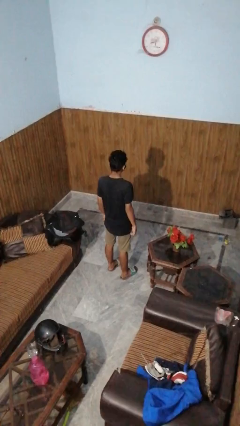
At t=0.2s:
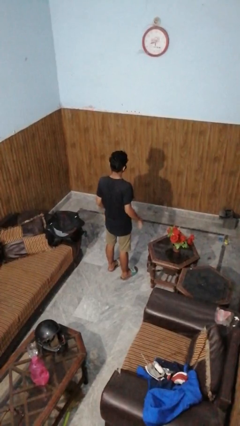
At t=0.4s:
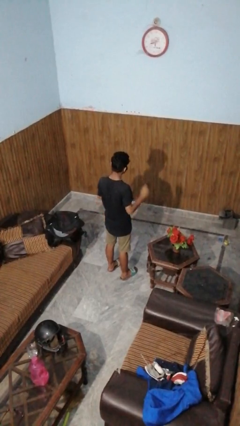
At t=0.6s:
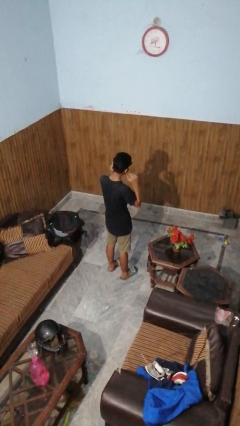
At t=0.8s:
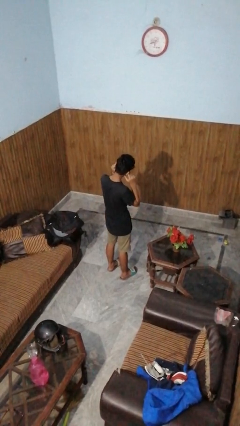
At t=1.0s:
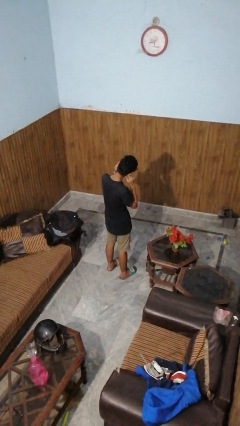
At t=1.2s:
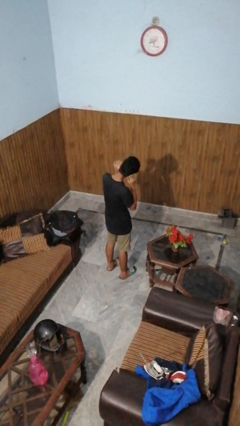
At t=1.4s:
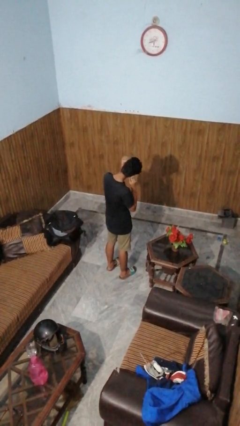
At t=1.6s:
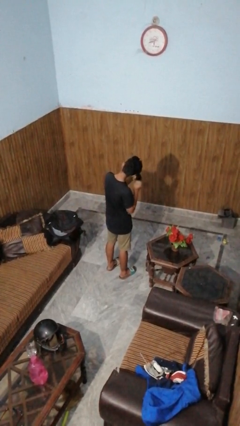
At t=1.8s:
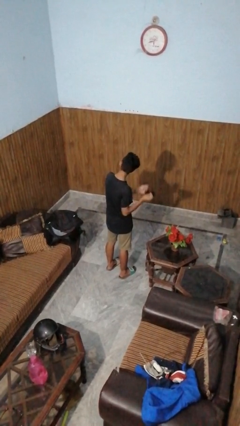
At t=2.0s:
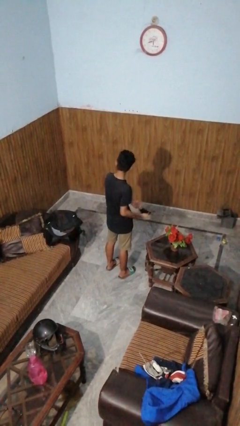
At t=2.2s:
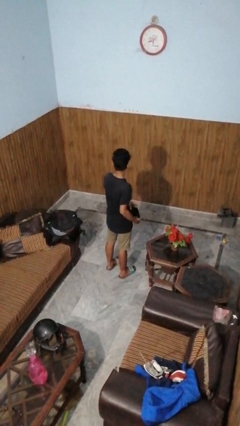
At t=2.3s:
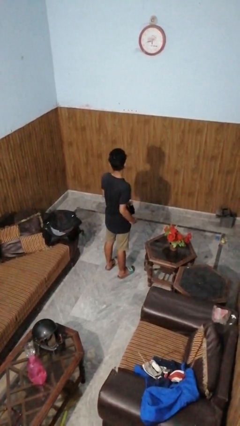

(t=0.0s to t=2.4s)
person takes off facemask

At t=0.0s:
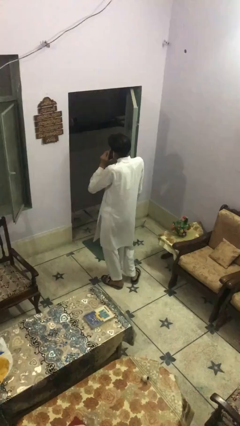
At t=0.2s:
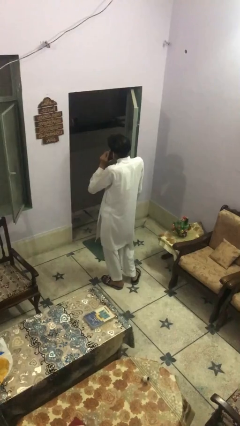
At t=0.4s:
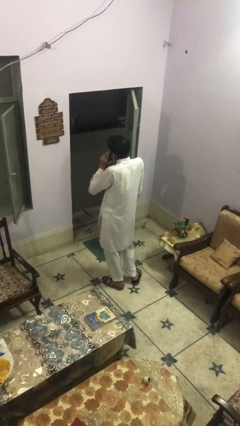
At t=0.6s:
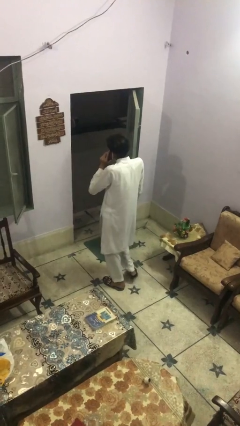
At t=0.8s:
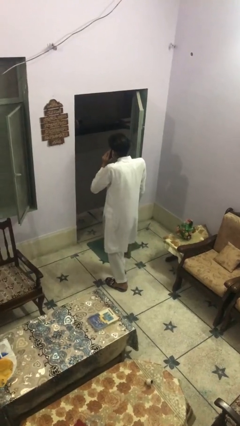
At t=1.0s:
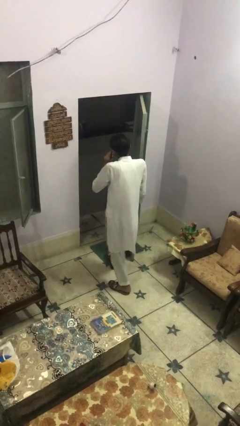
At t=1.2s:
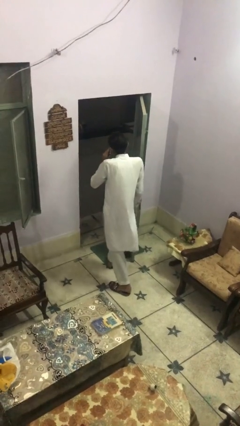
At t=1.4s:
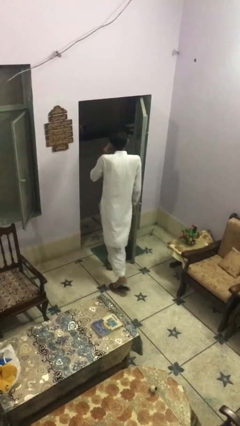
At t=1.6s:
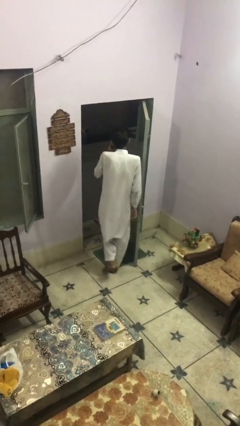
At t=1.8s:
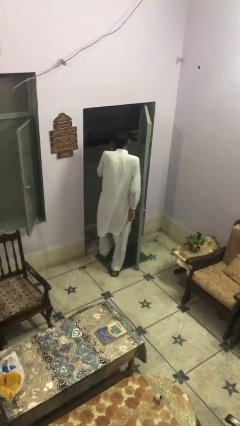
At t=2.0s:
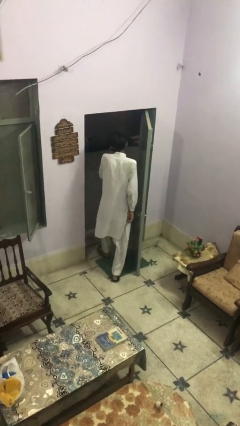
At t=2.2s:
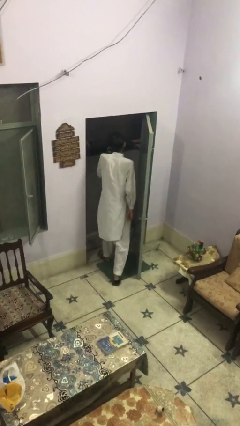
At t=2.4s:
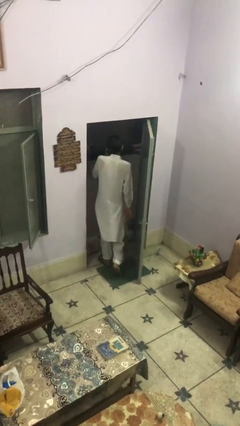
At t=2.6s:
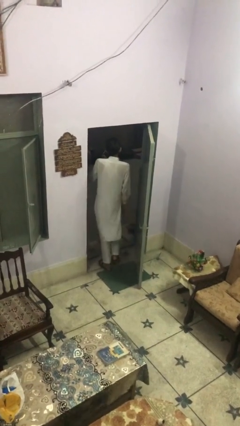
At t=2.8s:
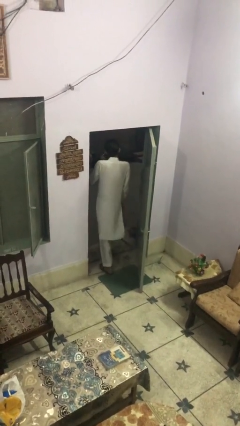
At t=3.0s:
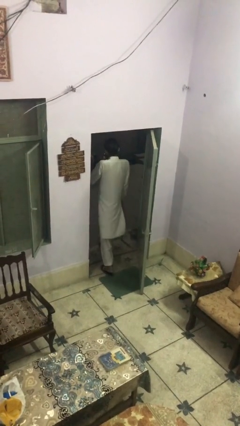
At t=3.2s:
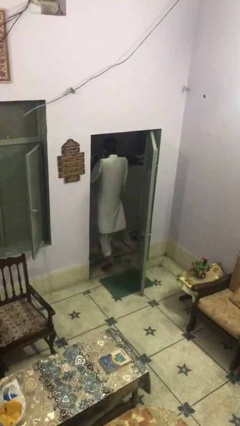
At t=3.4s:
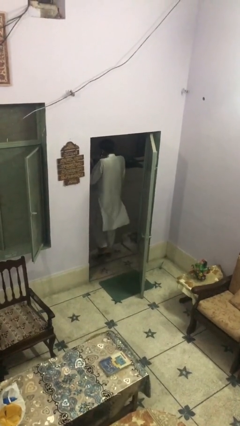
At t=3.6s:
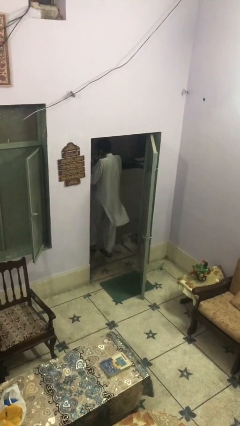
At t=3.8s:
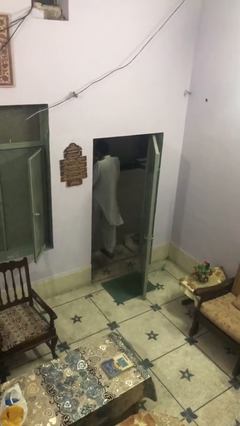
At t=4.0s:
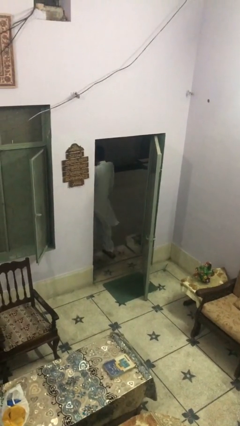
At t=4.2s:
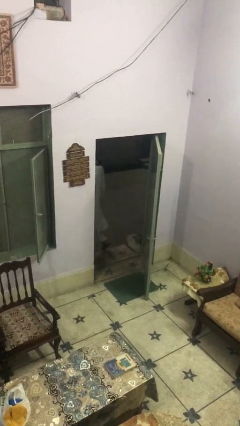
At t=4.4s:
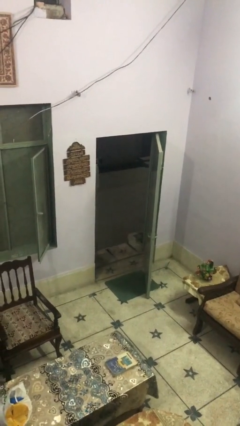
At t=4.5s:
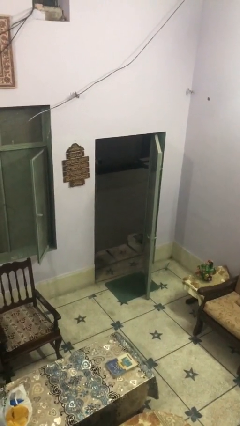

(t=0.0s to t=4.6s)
person exits scene through structure

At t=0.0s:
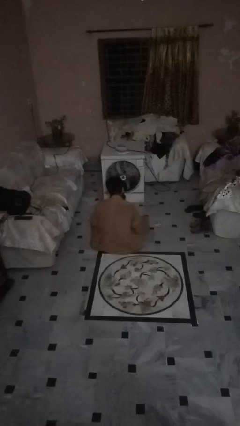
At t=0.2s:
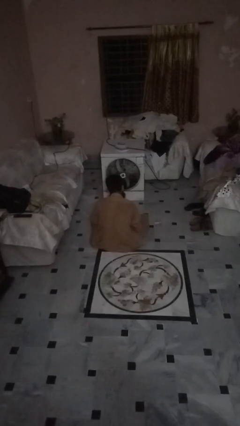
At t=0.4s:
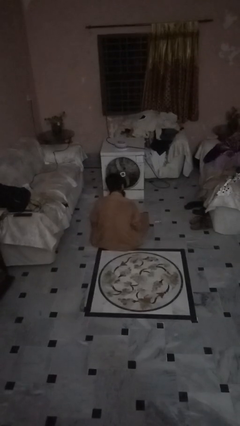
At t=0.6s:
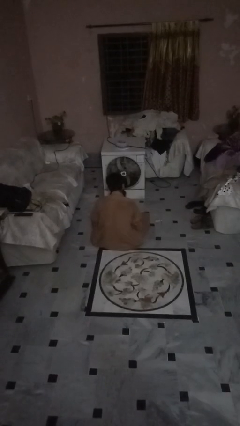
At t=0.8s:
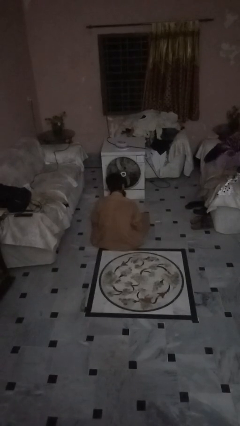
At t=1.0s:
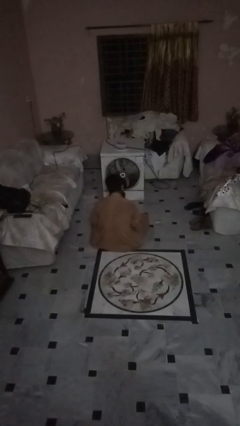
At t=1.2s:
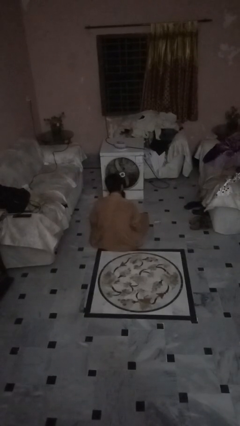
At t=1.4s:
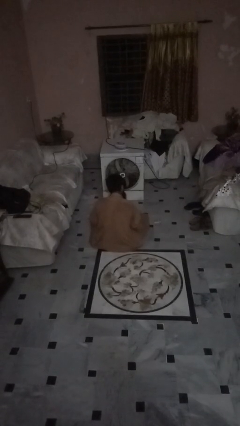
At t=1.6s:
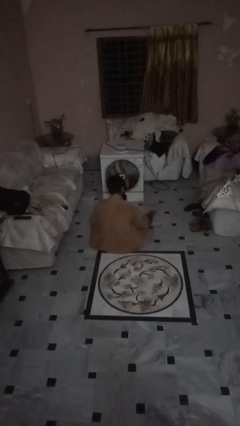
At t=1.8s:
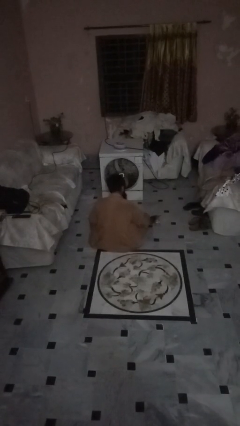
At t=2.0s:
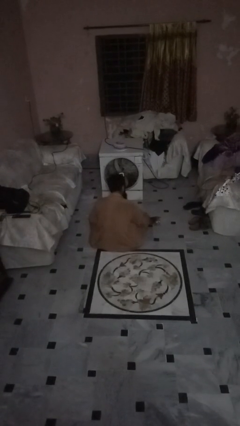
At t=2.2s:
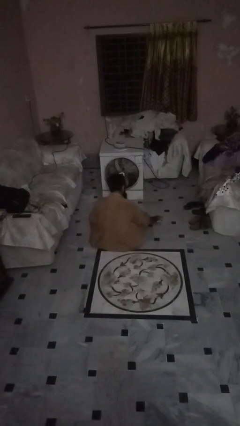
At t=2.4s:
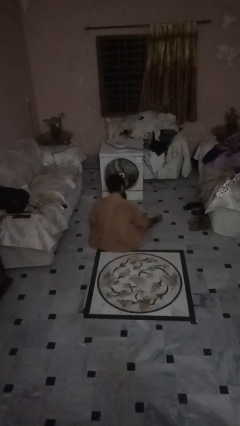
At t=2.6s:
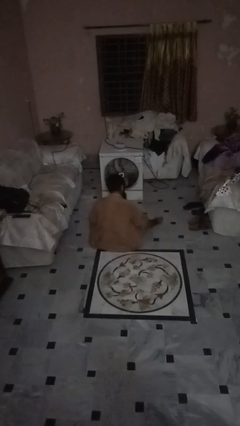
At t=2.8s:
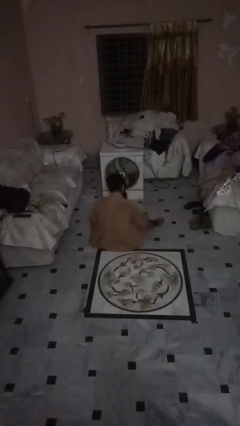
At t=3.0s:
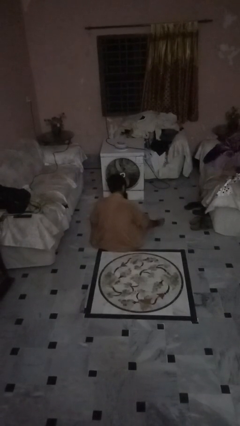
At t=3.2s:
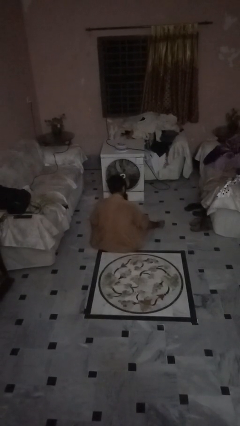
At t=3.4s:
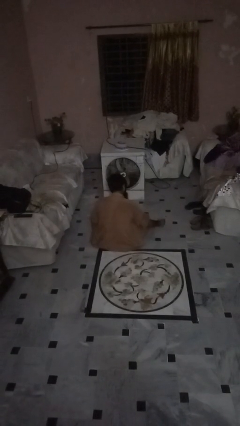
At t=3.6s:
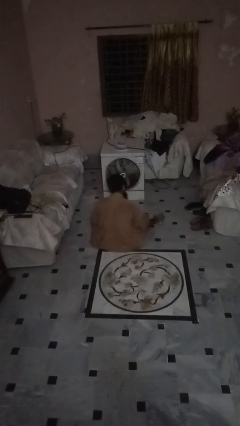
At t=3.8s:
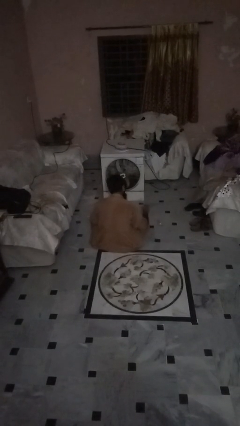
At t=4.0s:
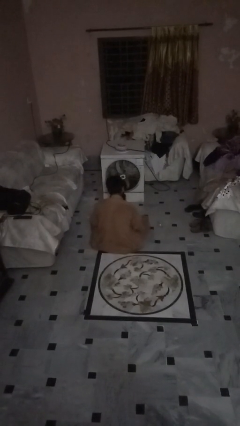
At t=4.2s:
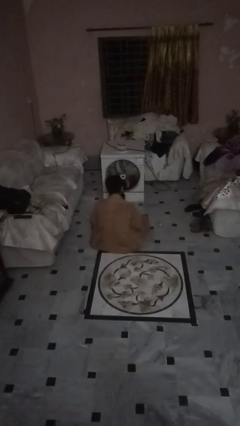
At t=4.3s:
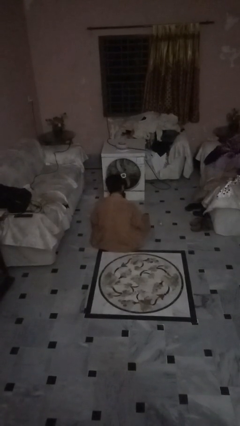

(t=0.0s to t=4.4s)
person sets upright glass

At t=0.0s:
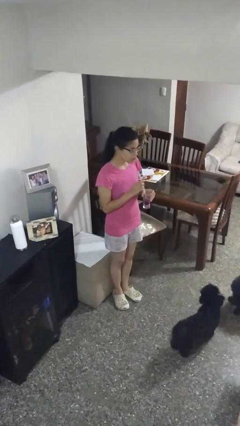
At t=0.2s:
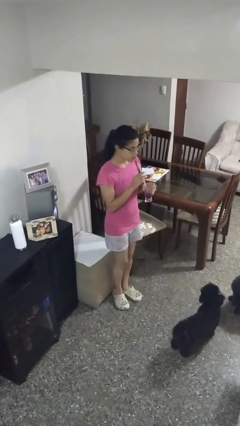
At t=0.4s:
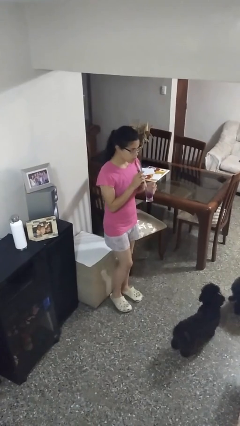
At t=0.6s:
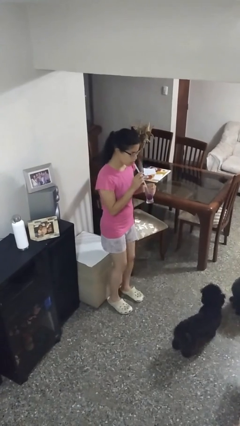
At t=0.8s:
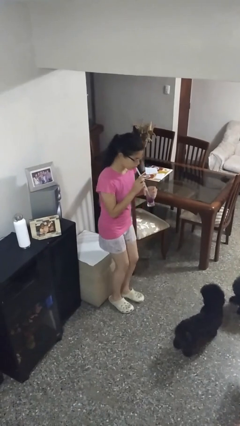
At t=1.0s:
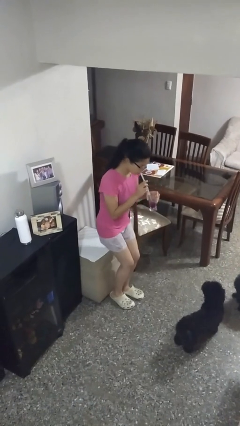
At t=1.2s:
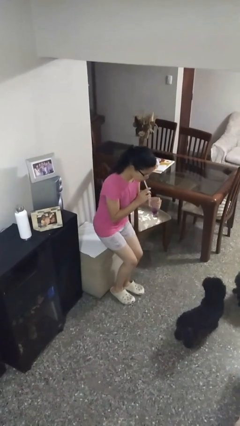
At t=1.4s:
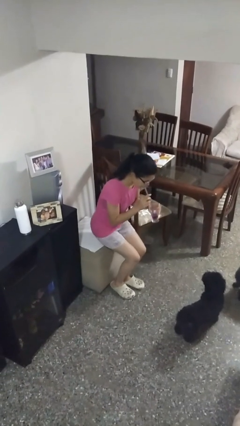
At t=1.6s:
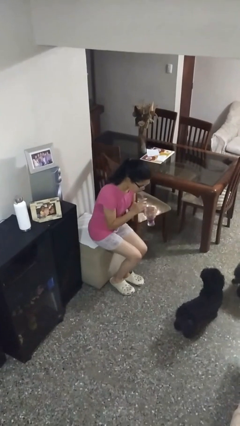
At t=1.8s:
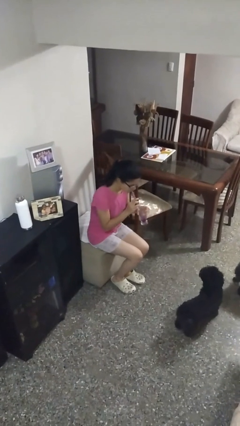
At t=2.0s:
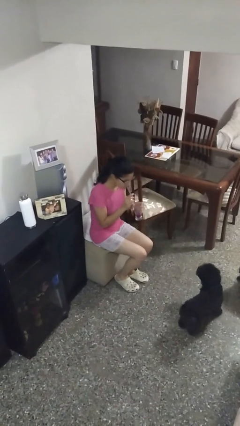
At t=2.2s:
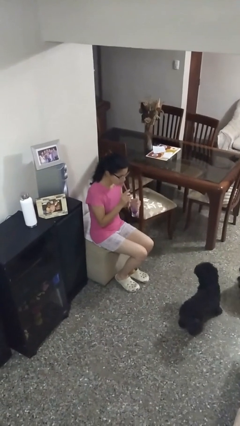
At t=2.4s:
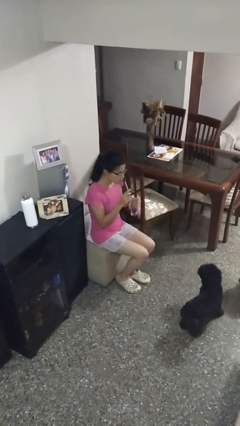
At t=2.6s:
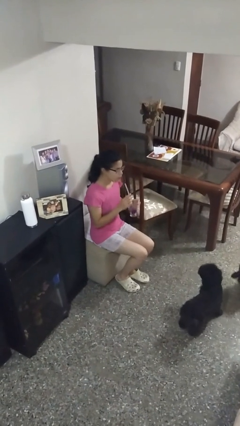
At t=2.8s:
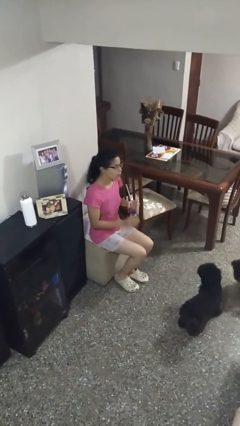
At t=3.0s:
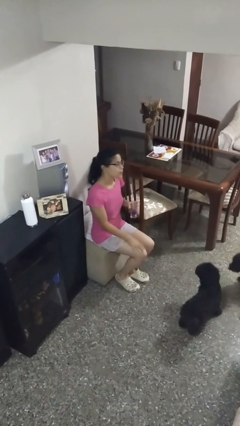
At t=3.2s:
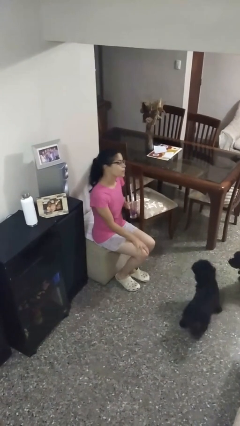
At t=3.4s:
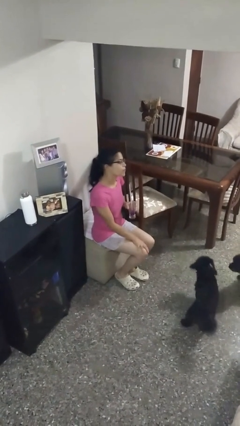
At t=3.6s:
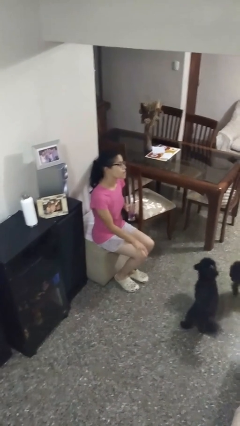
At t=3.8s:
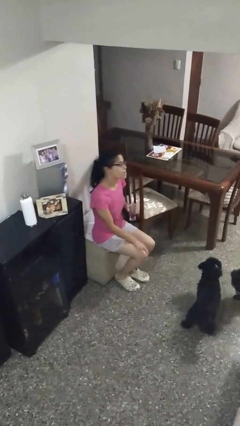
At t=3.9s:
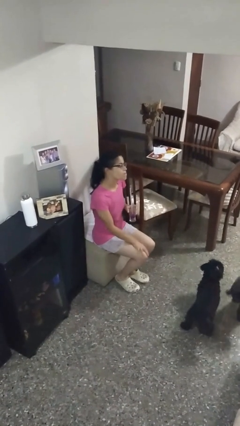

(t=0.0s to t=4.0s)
person drinks from straw

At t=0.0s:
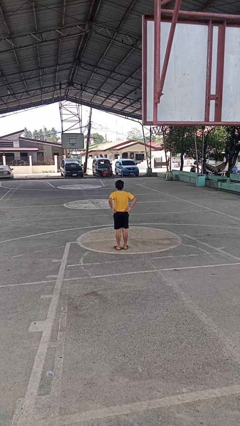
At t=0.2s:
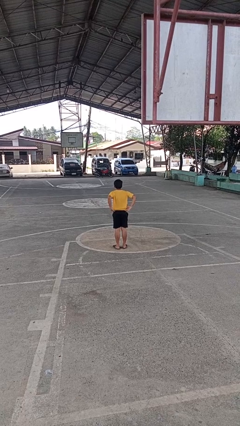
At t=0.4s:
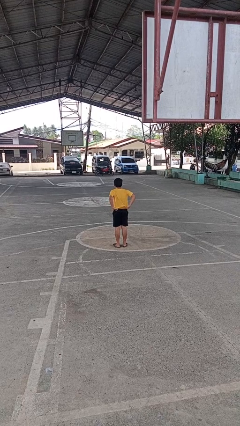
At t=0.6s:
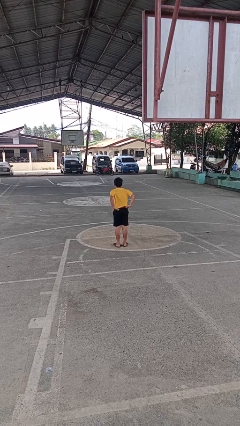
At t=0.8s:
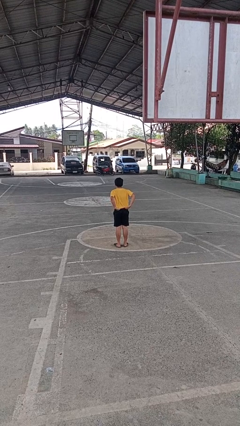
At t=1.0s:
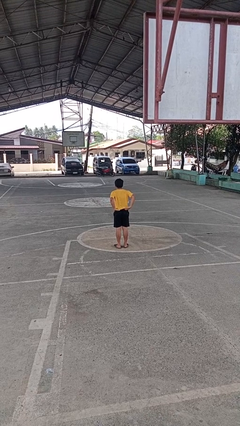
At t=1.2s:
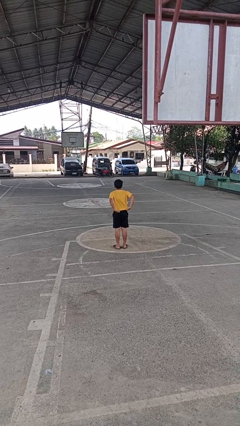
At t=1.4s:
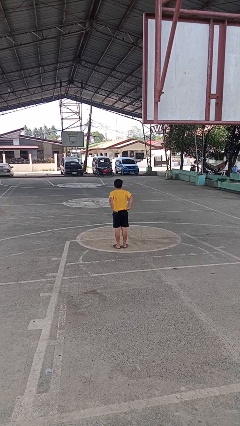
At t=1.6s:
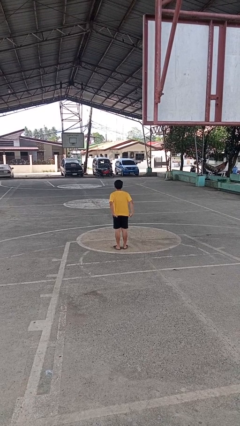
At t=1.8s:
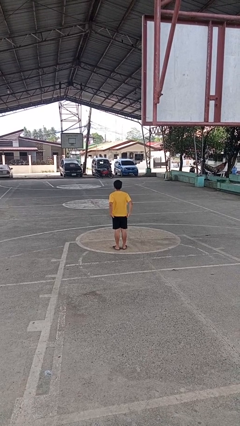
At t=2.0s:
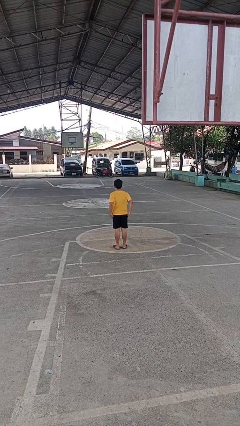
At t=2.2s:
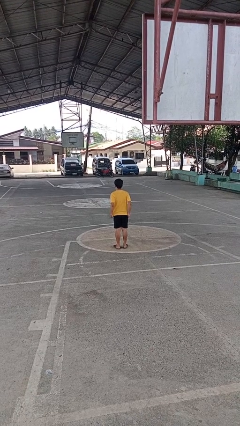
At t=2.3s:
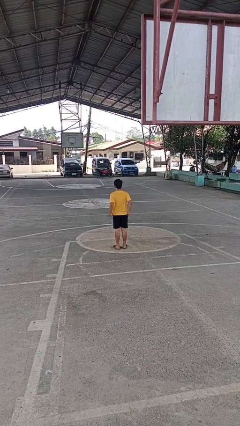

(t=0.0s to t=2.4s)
person untucks shirt
